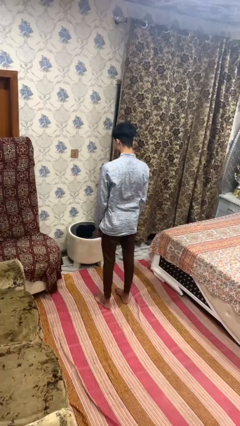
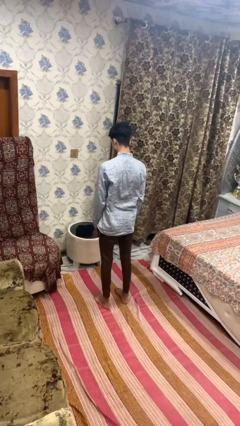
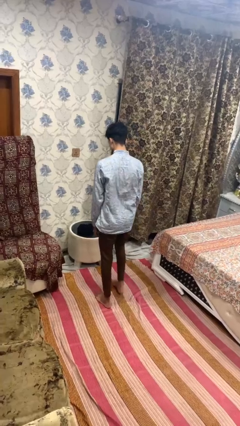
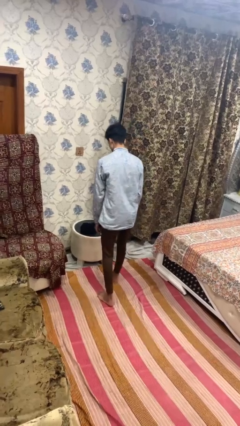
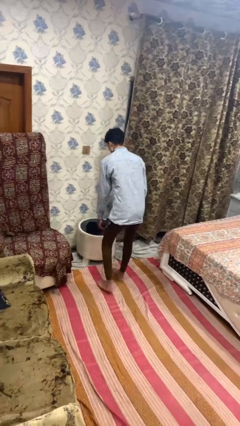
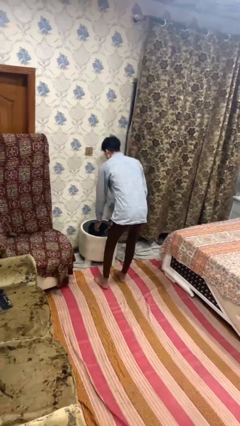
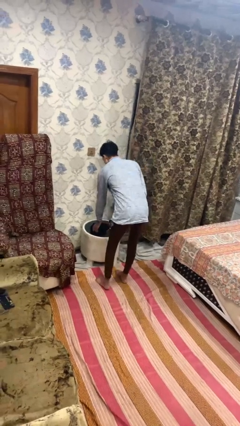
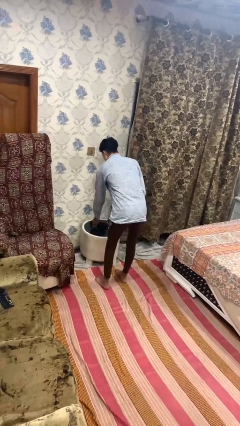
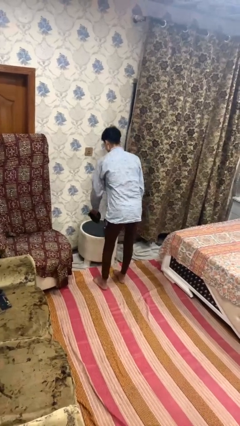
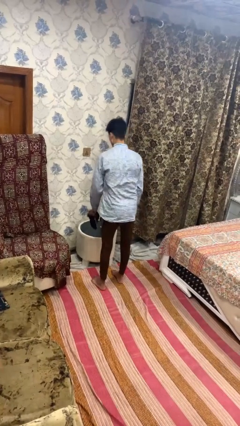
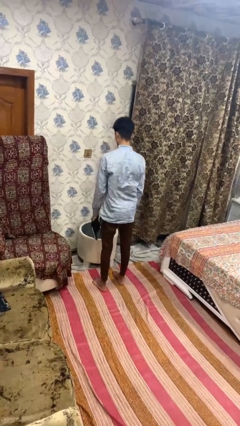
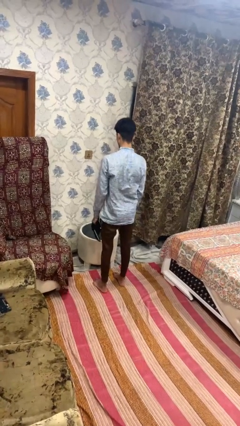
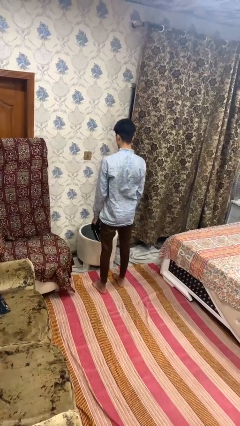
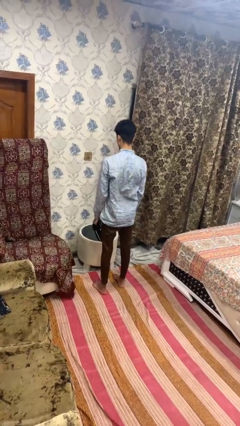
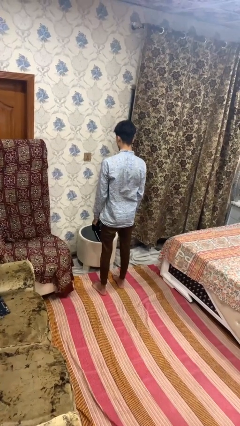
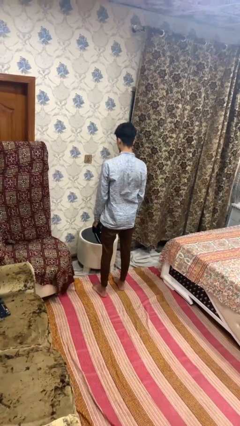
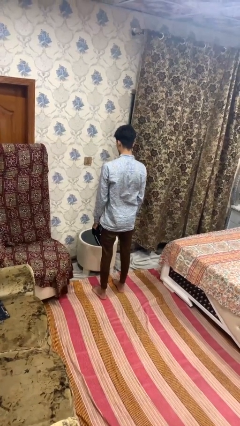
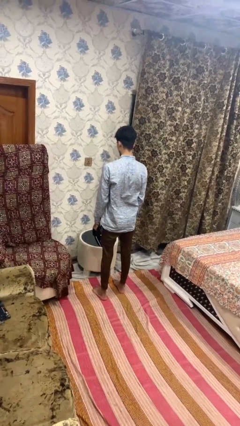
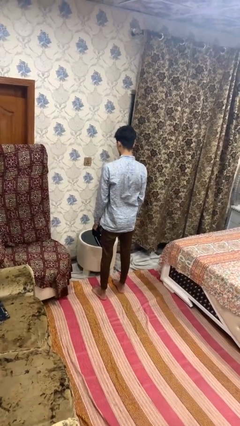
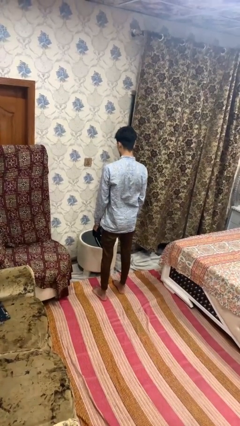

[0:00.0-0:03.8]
person picks up object from table

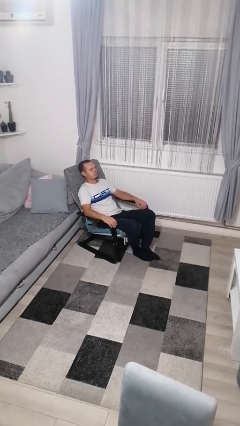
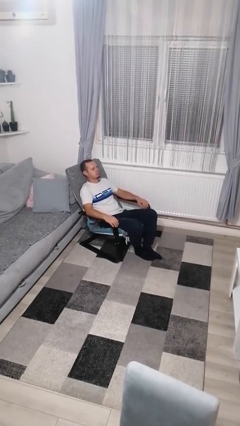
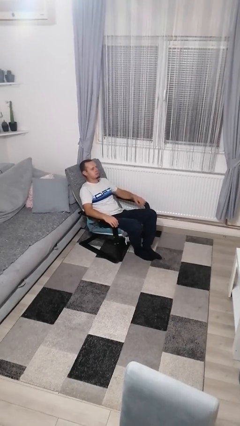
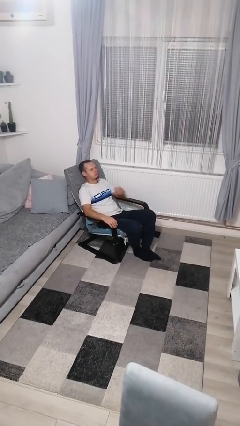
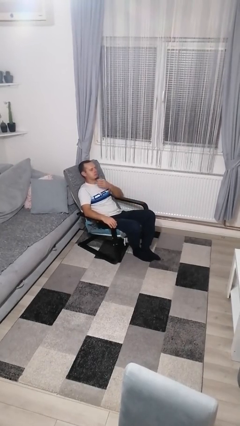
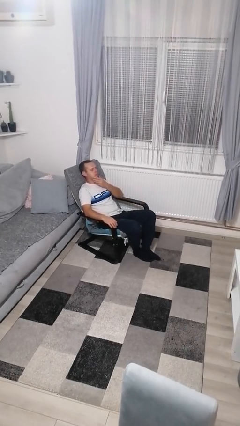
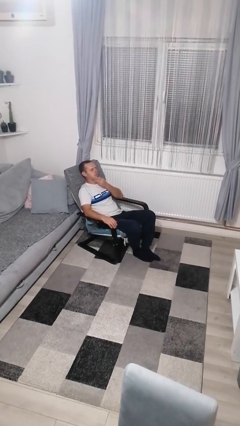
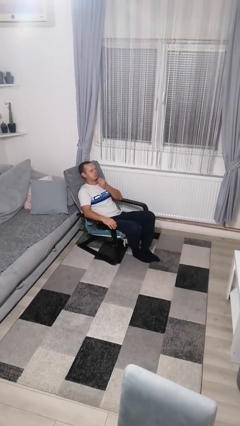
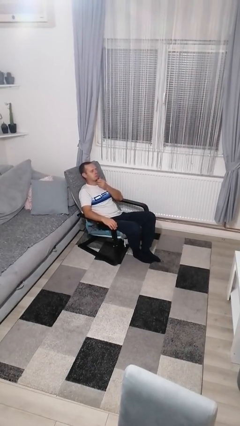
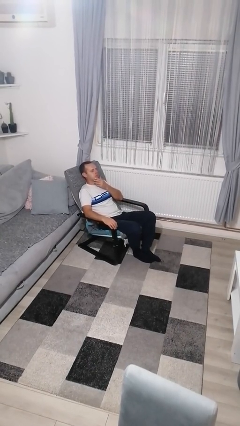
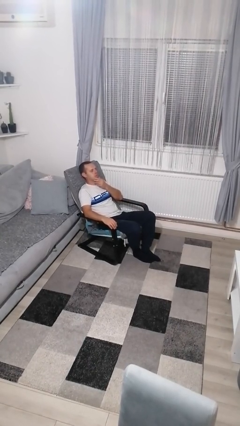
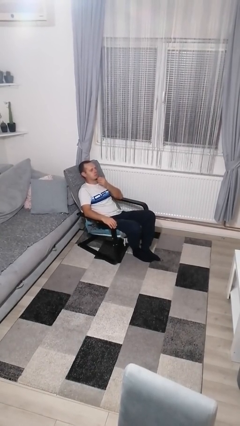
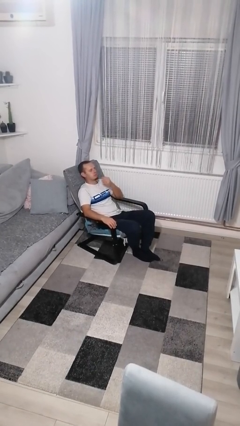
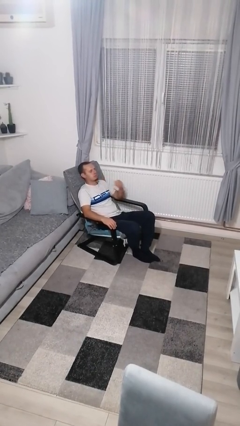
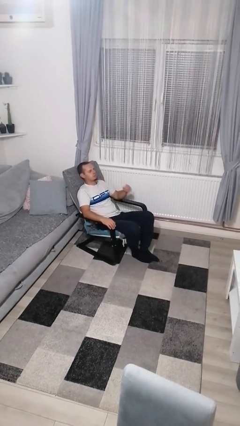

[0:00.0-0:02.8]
person strokes chin

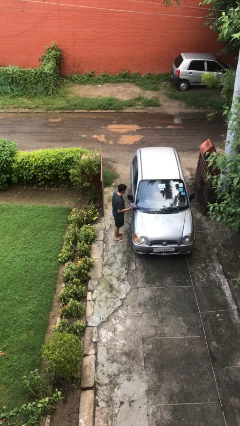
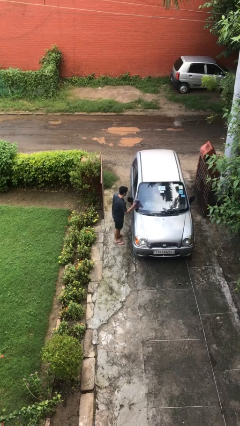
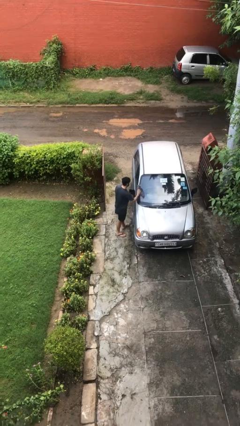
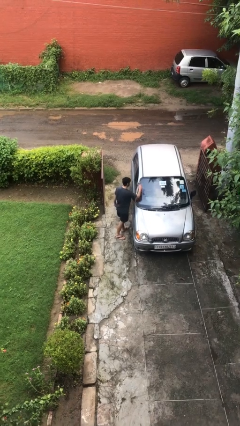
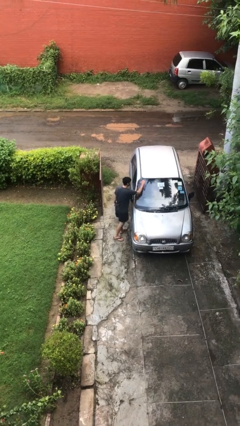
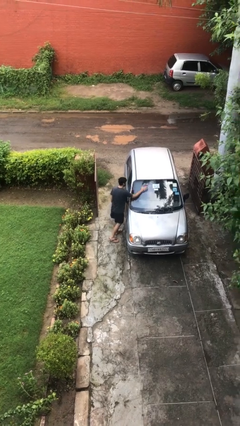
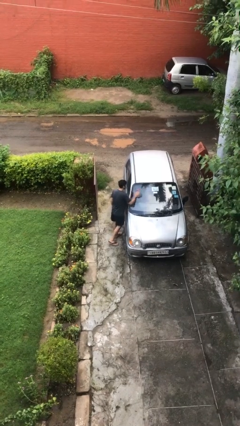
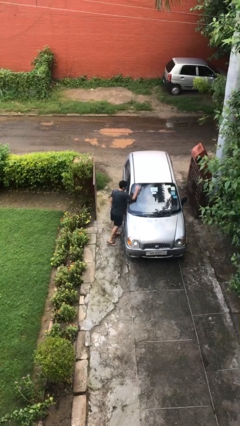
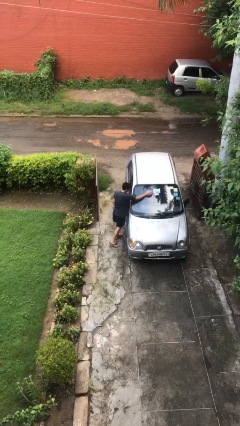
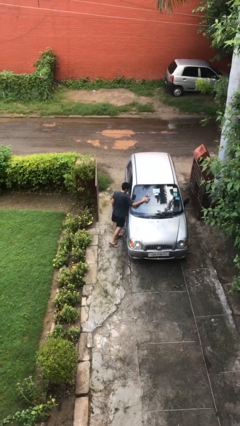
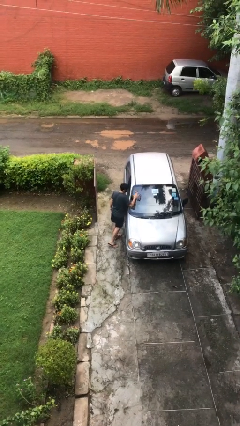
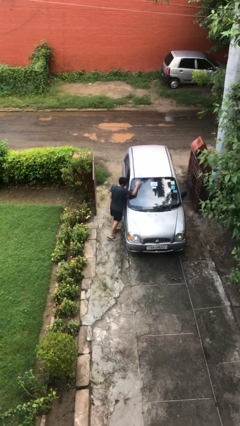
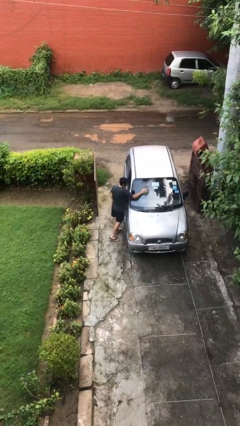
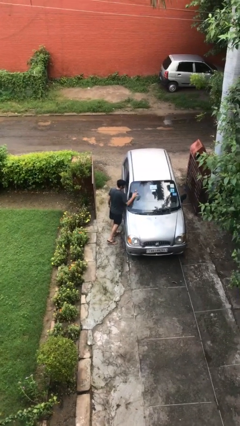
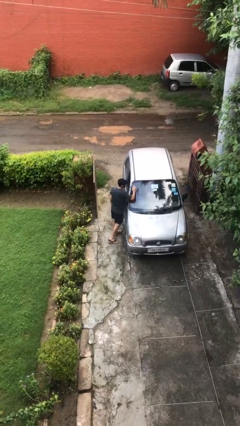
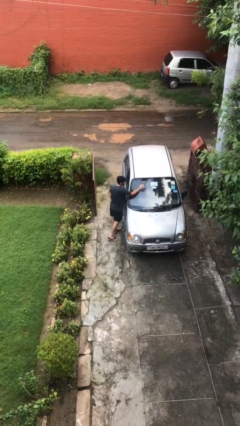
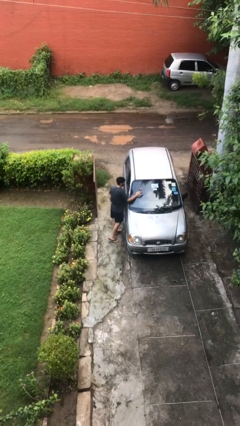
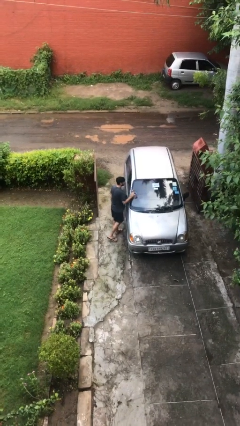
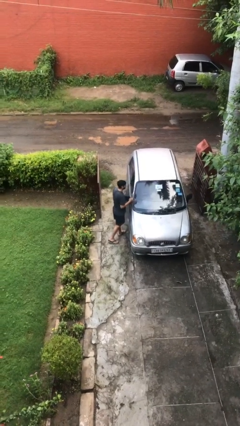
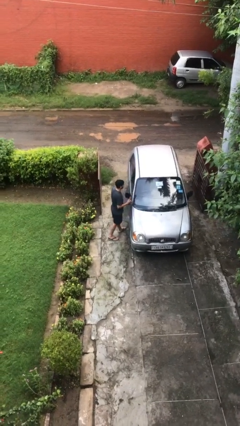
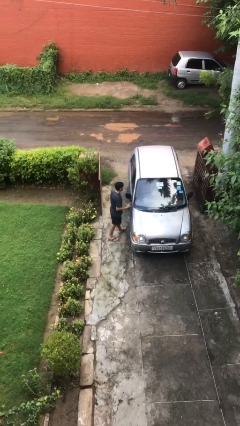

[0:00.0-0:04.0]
person polishes car with rag

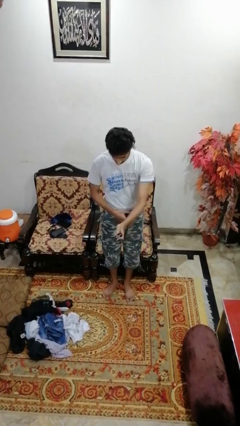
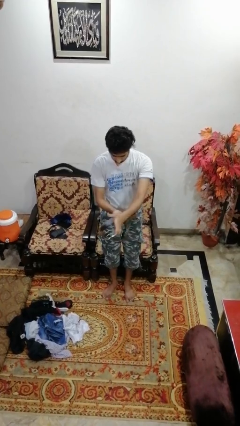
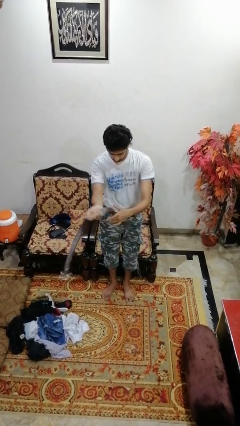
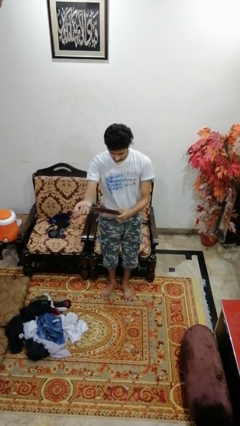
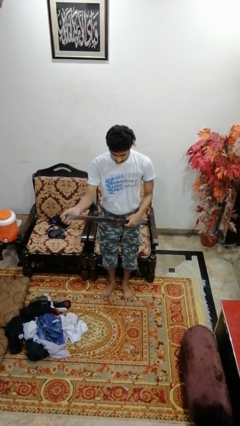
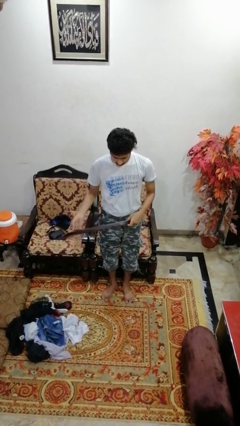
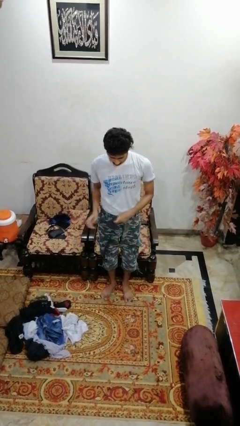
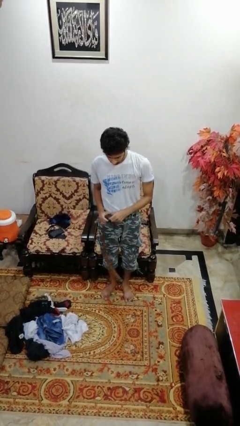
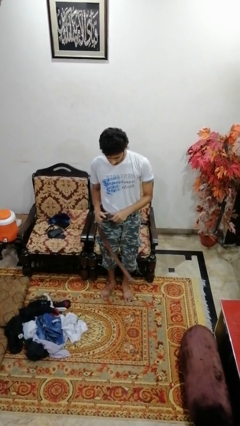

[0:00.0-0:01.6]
person takes off belt

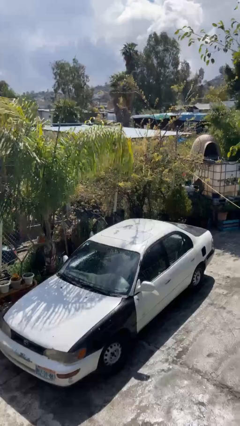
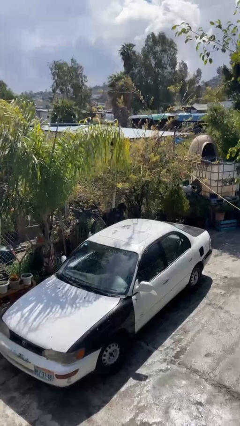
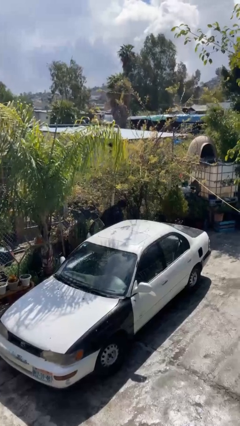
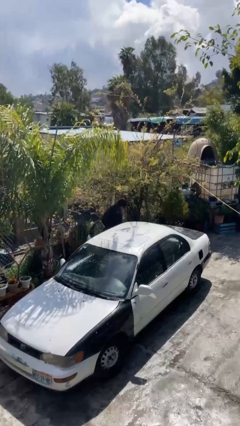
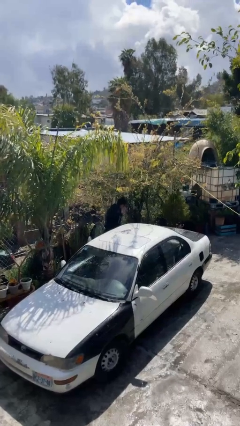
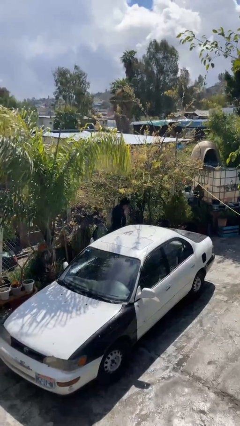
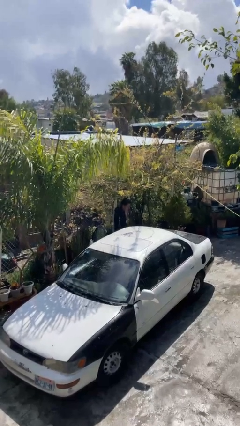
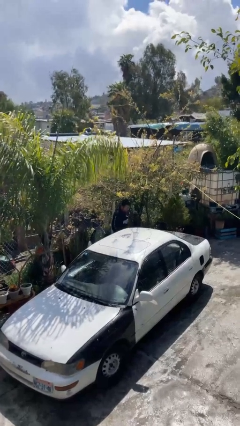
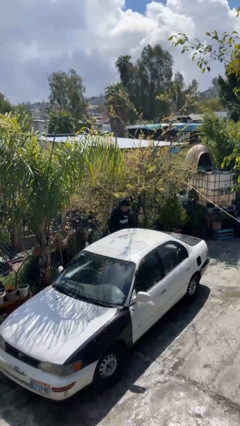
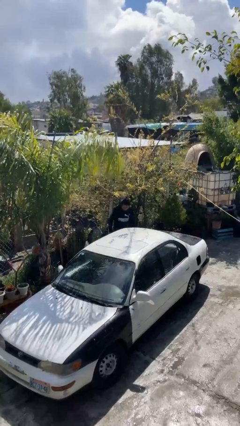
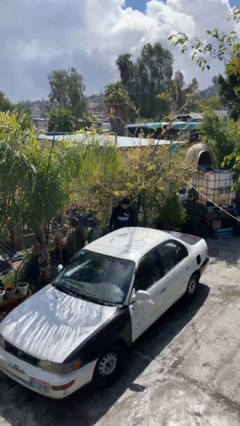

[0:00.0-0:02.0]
person exits car

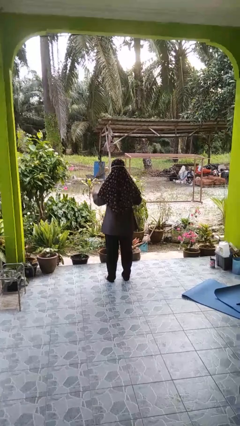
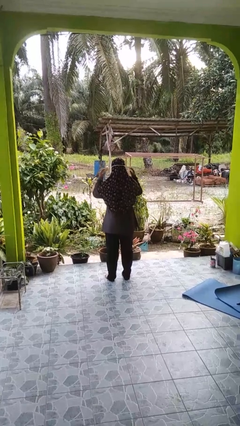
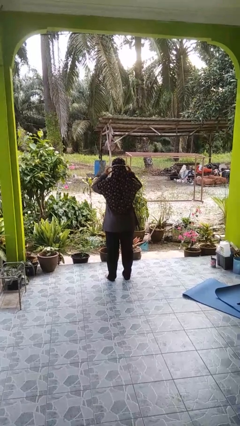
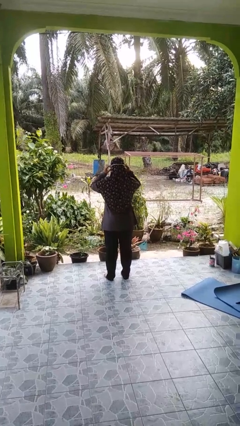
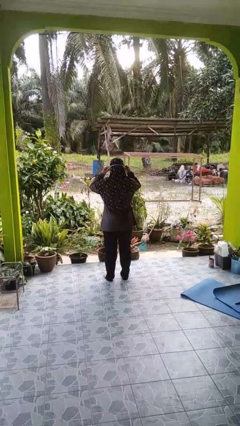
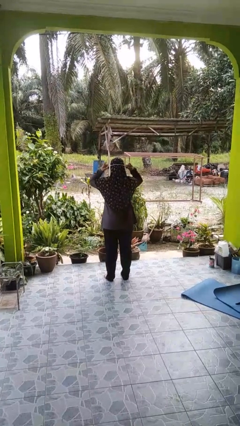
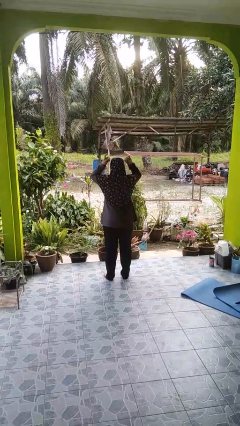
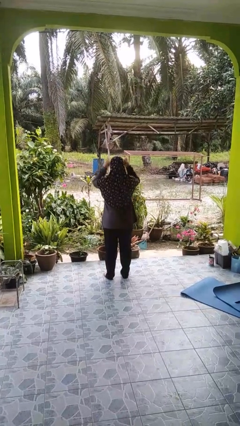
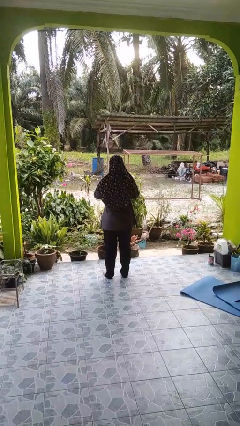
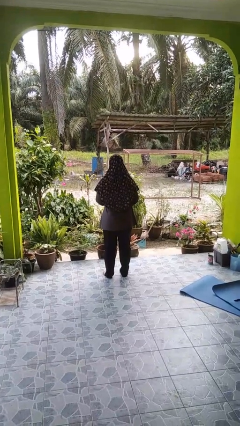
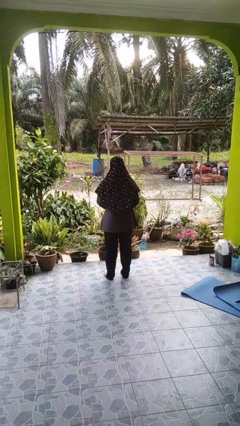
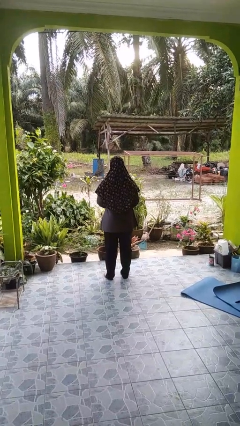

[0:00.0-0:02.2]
person takes off facemask

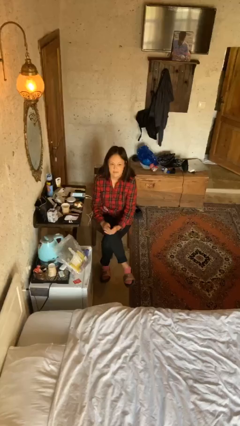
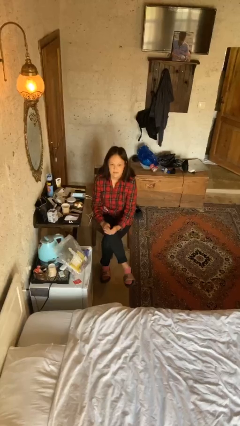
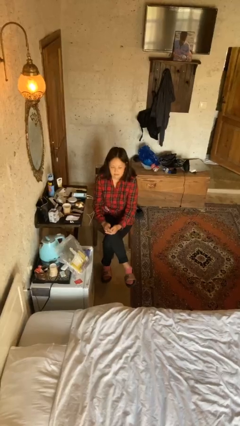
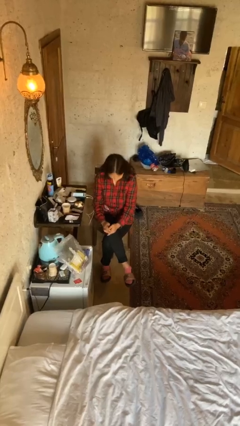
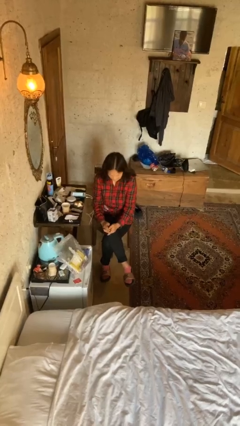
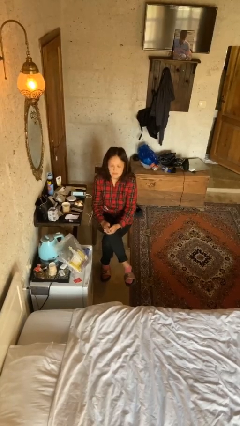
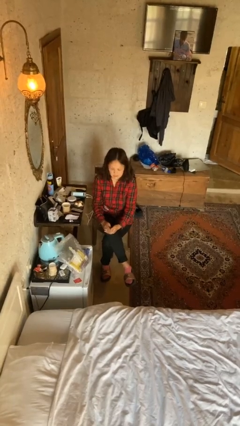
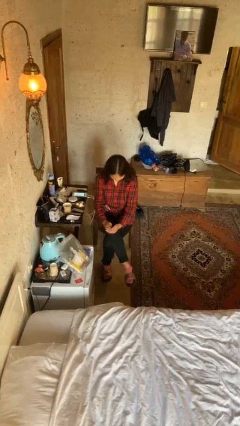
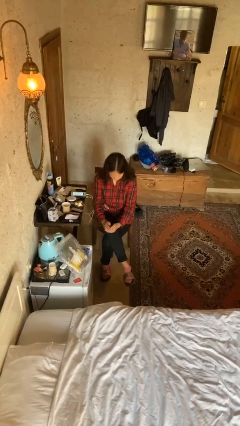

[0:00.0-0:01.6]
person nods head
